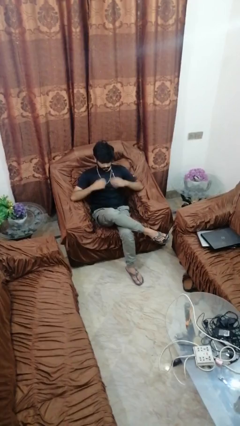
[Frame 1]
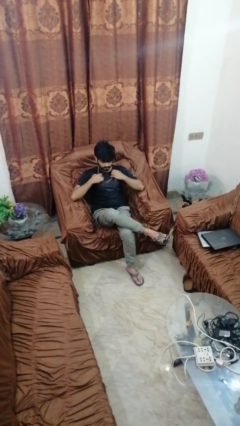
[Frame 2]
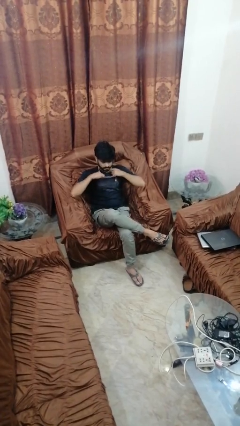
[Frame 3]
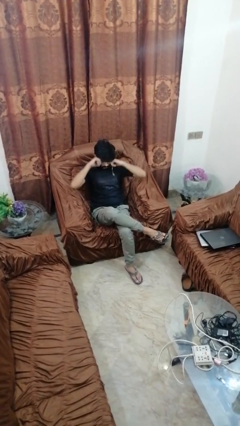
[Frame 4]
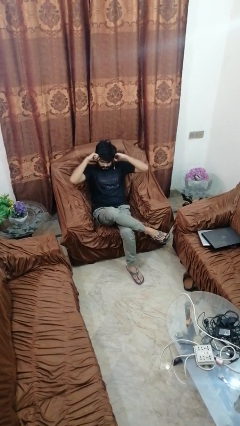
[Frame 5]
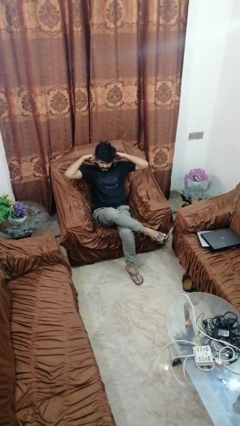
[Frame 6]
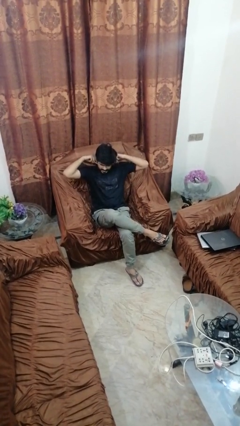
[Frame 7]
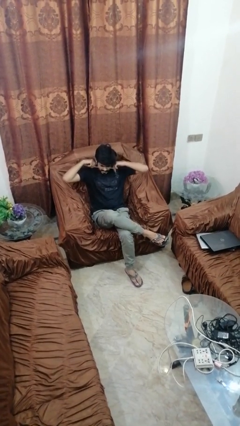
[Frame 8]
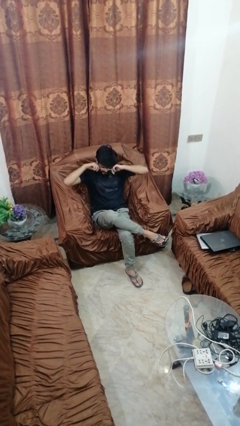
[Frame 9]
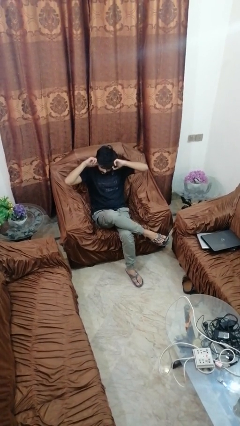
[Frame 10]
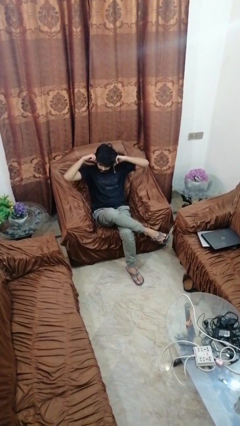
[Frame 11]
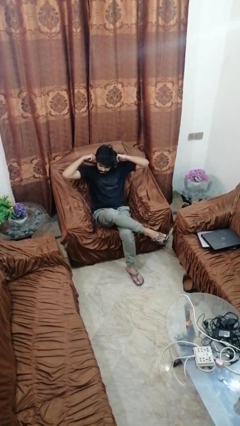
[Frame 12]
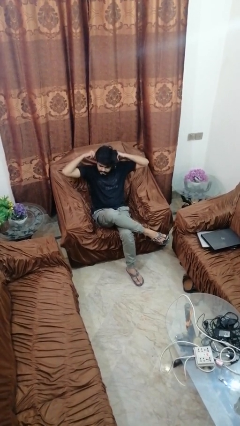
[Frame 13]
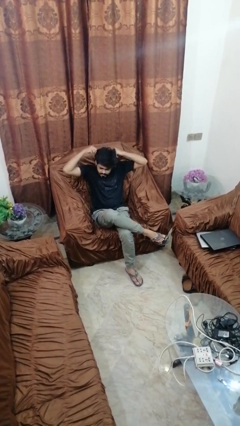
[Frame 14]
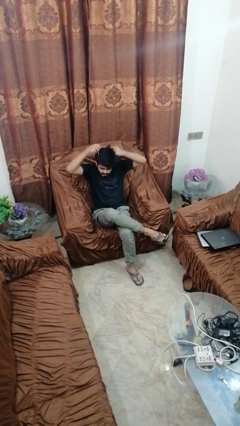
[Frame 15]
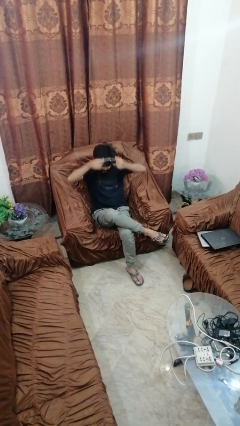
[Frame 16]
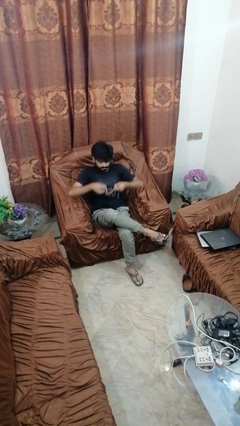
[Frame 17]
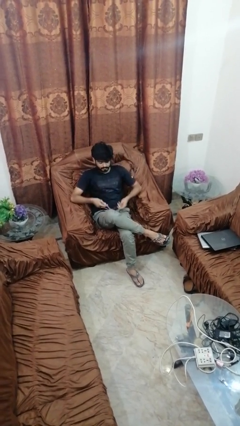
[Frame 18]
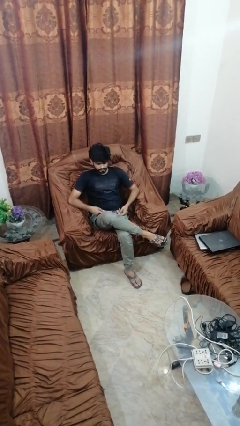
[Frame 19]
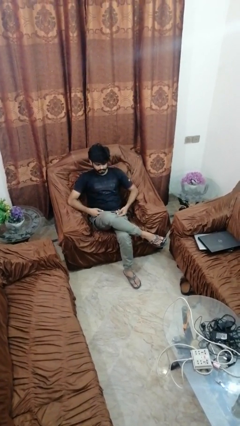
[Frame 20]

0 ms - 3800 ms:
person takes off necklace

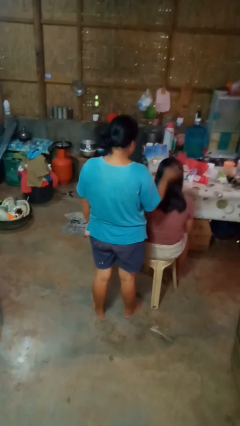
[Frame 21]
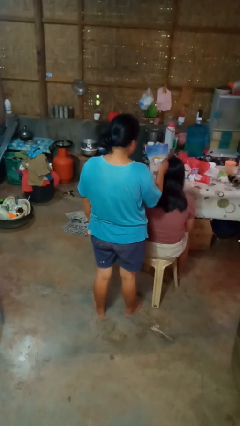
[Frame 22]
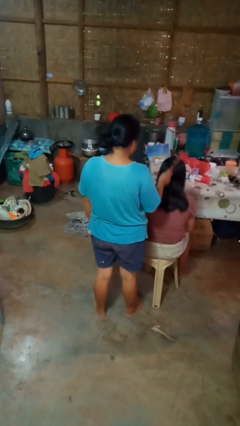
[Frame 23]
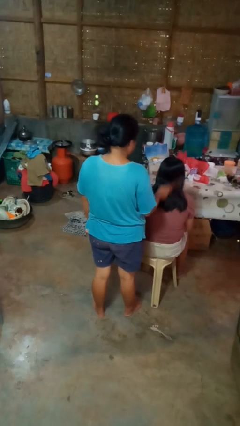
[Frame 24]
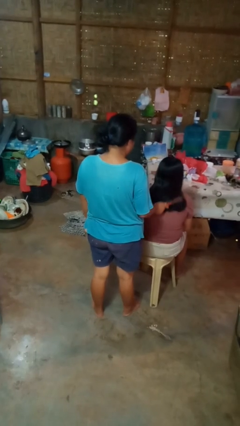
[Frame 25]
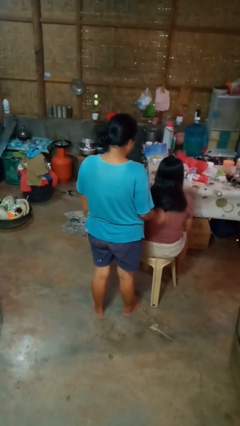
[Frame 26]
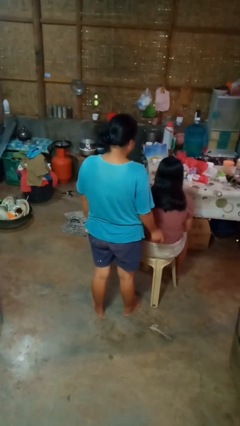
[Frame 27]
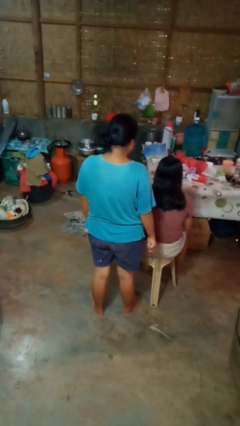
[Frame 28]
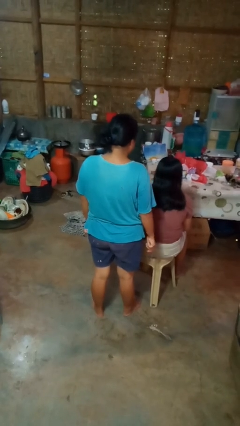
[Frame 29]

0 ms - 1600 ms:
person brushes hair of person

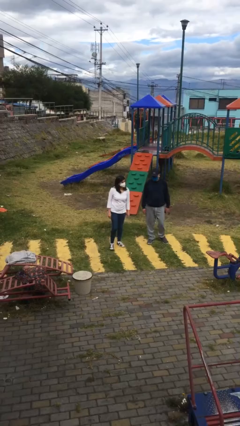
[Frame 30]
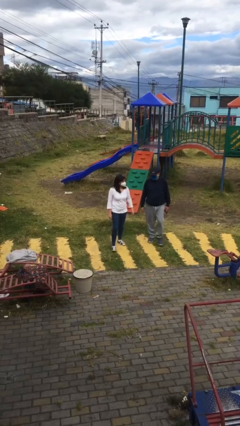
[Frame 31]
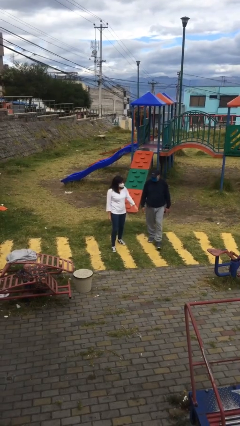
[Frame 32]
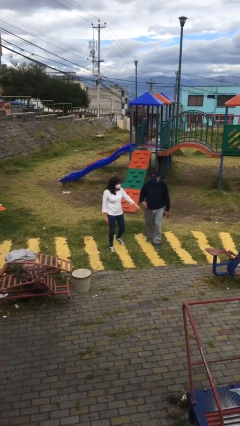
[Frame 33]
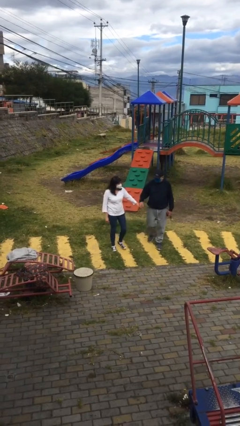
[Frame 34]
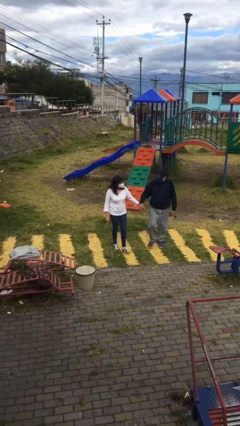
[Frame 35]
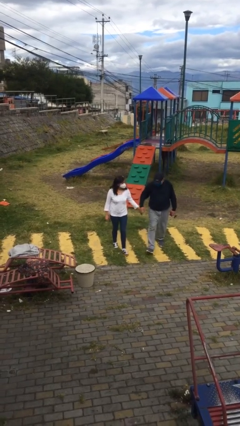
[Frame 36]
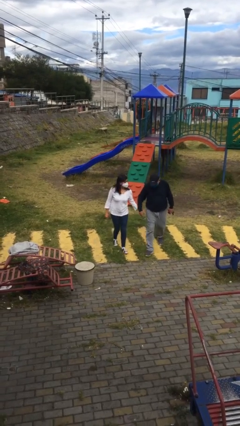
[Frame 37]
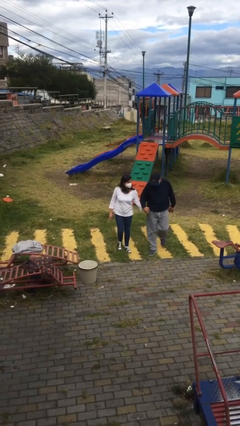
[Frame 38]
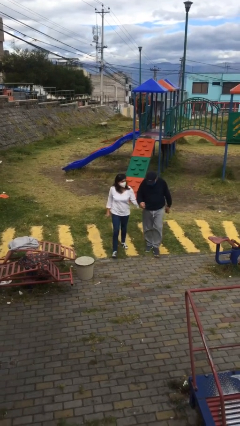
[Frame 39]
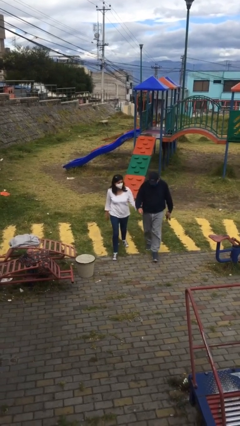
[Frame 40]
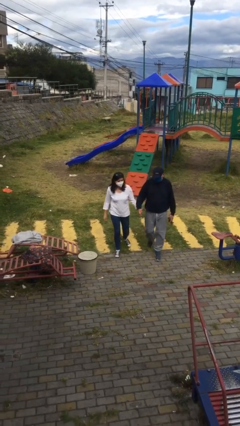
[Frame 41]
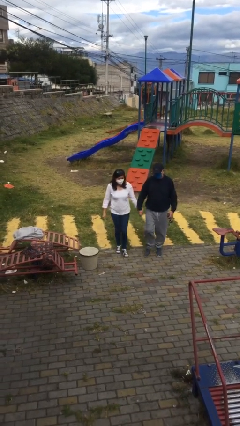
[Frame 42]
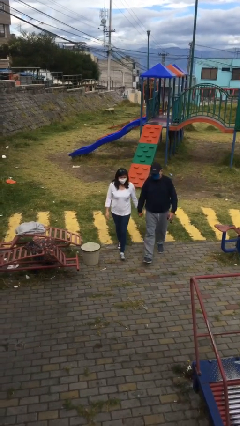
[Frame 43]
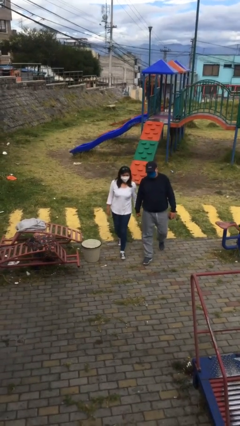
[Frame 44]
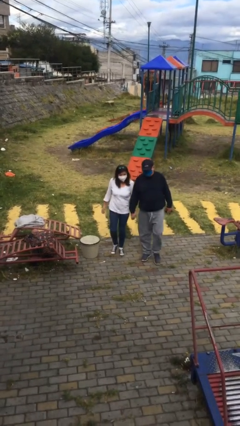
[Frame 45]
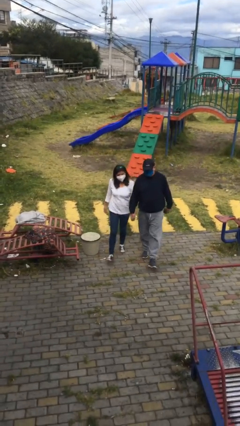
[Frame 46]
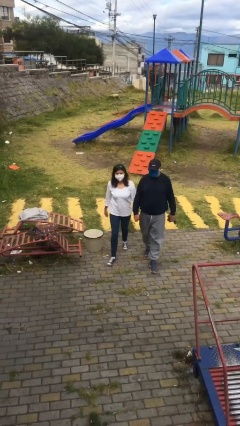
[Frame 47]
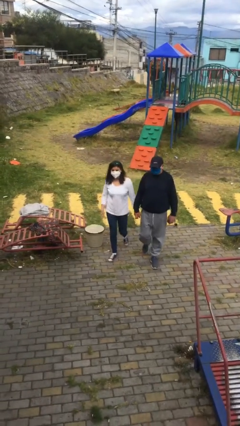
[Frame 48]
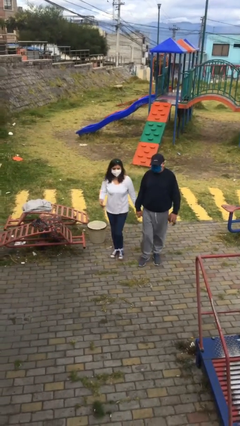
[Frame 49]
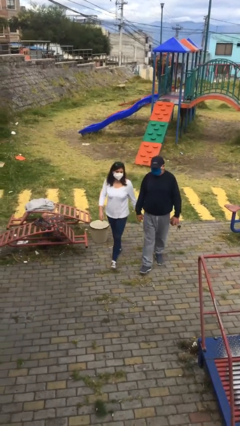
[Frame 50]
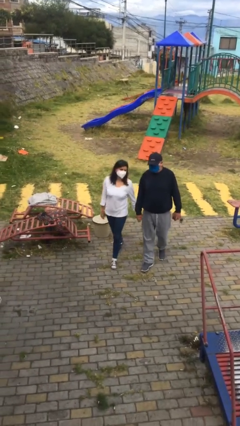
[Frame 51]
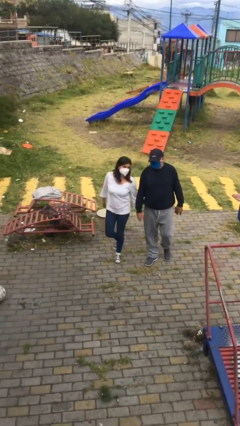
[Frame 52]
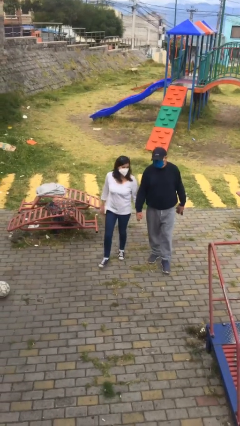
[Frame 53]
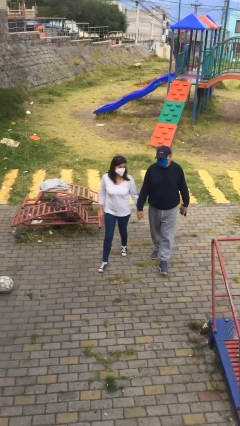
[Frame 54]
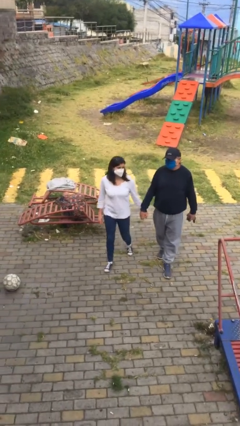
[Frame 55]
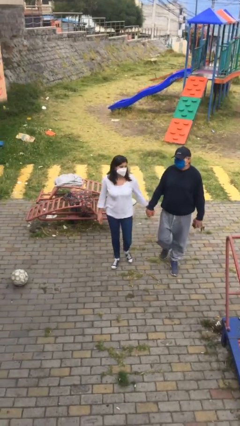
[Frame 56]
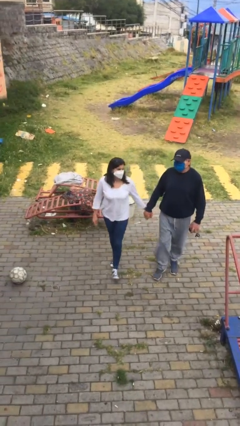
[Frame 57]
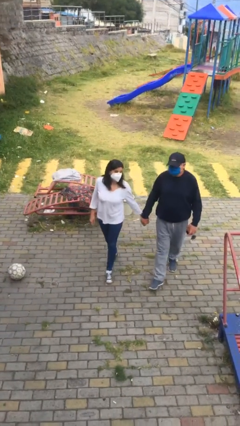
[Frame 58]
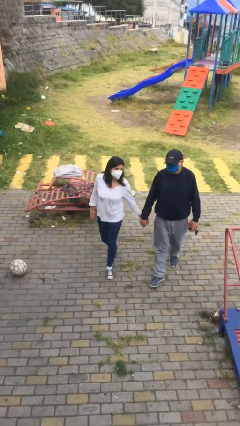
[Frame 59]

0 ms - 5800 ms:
person holds hand

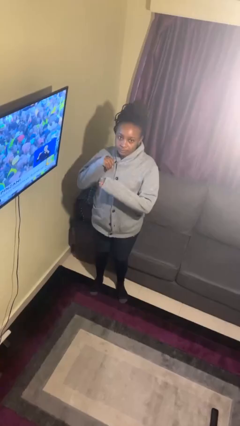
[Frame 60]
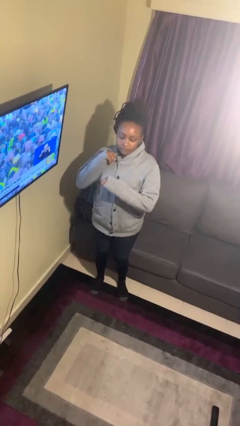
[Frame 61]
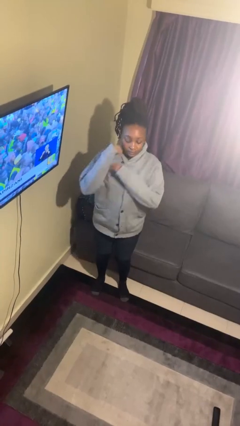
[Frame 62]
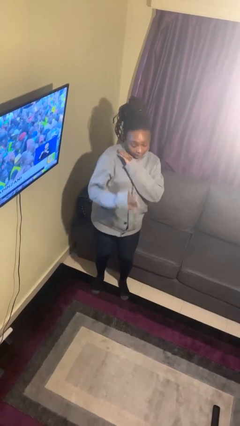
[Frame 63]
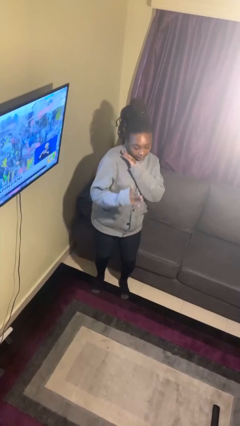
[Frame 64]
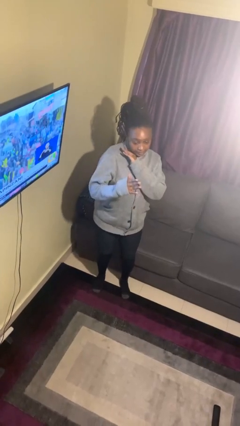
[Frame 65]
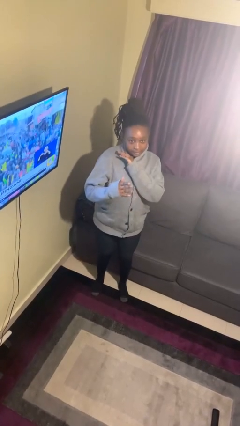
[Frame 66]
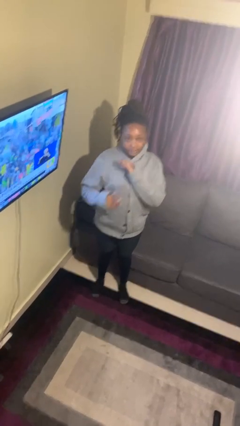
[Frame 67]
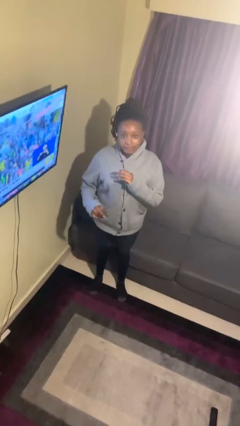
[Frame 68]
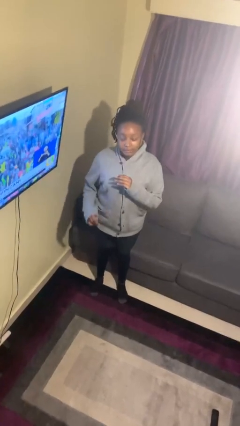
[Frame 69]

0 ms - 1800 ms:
person karate chop

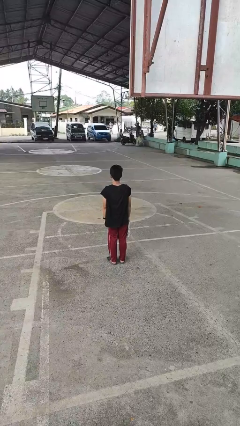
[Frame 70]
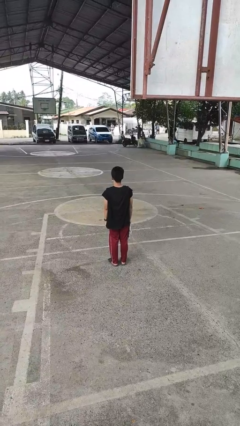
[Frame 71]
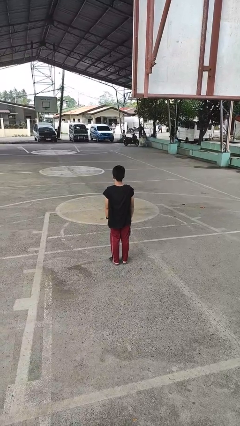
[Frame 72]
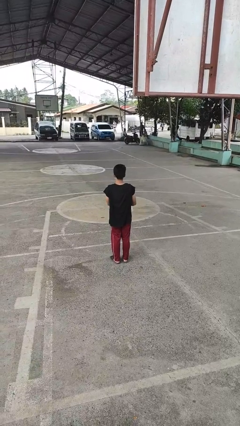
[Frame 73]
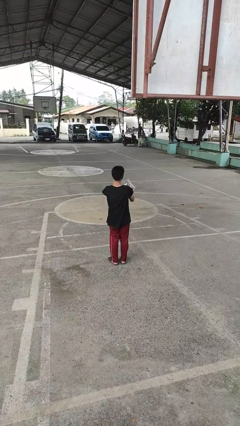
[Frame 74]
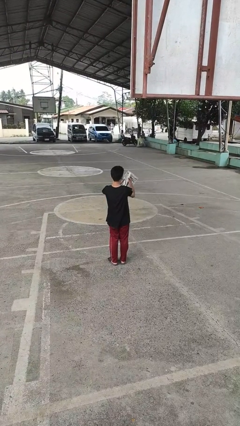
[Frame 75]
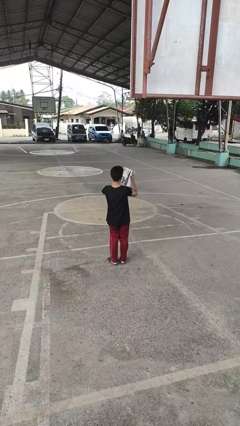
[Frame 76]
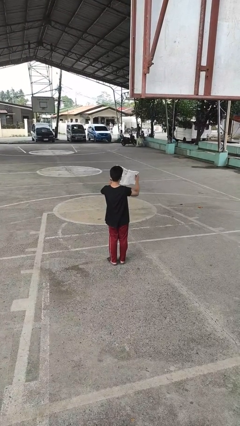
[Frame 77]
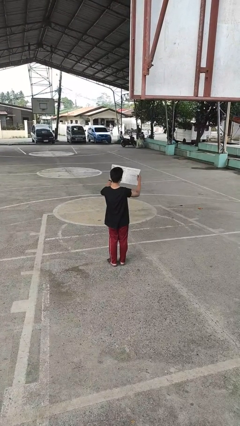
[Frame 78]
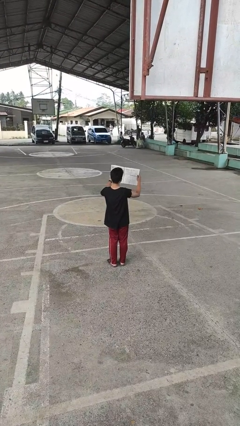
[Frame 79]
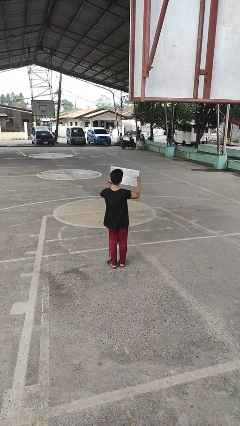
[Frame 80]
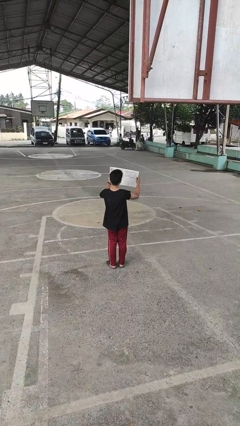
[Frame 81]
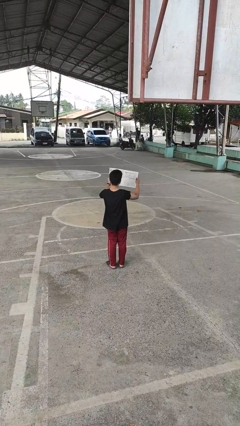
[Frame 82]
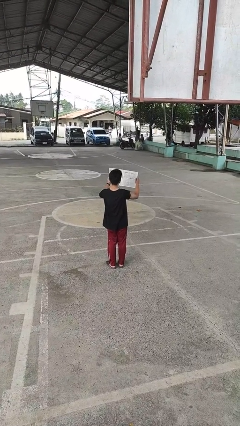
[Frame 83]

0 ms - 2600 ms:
person reads newspaper

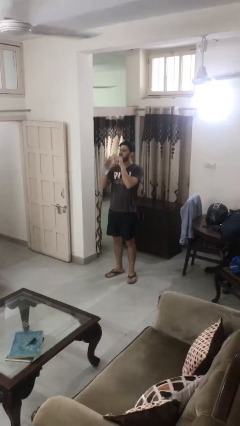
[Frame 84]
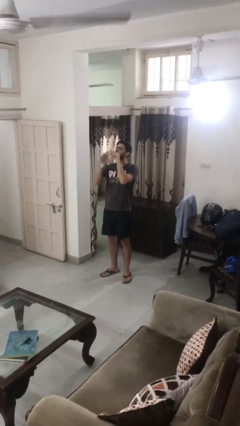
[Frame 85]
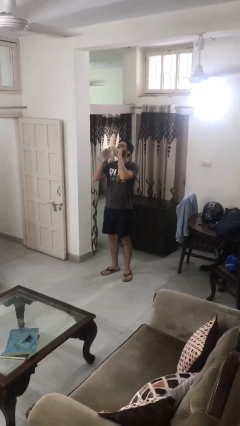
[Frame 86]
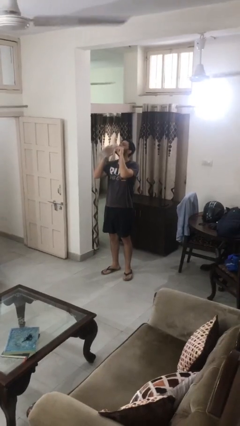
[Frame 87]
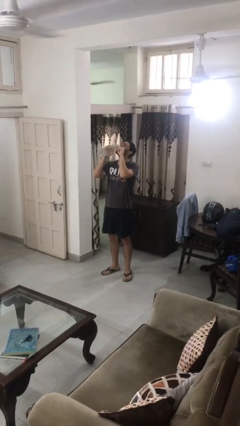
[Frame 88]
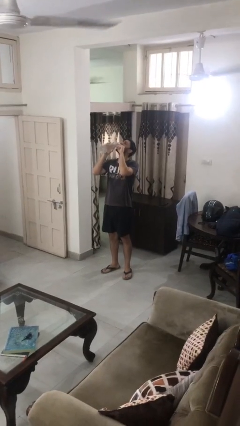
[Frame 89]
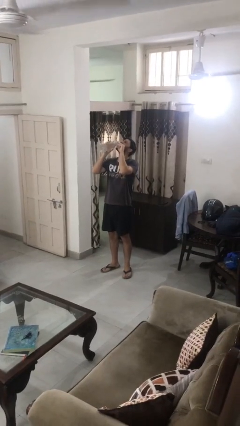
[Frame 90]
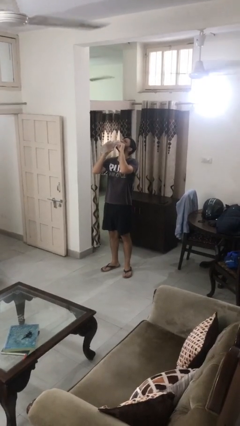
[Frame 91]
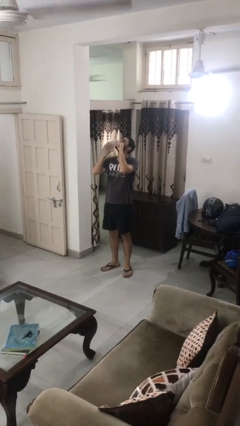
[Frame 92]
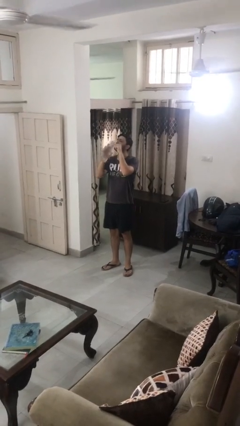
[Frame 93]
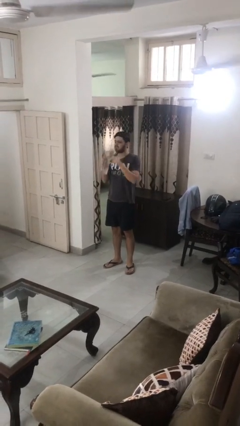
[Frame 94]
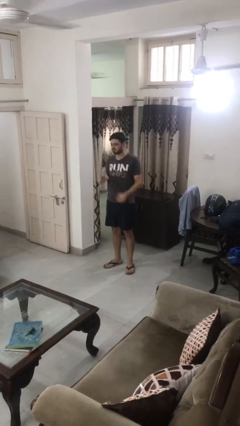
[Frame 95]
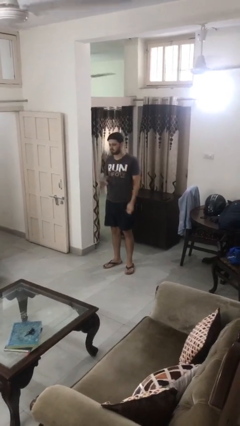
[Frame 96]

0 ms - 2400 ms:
person drinks from bottle
